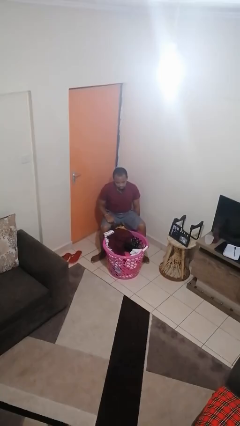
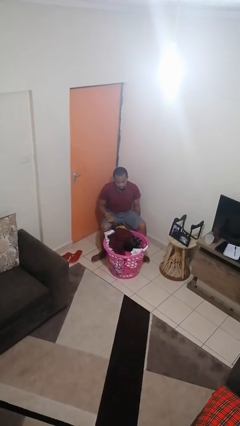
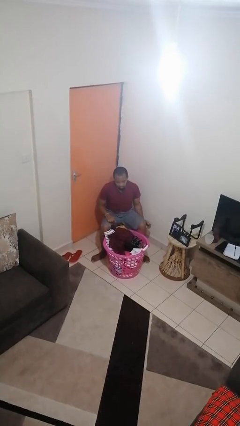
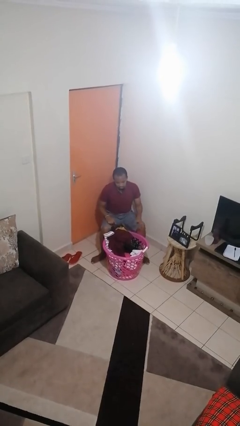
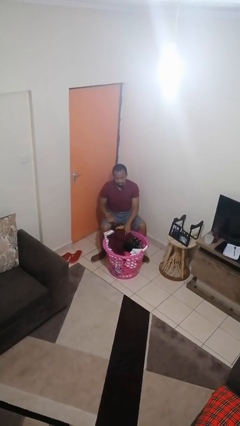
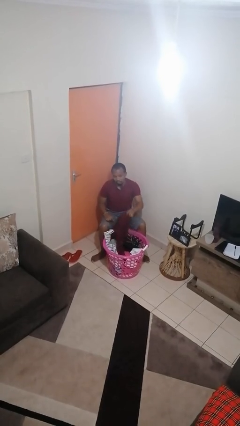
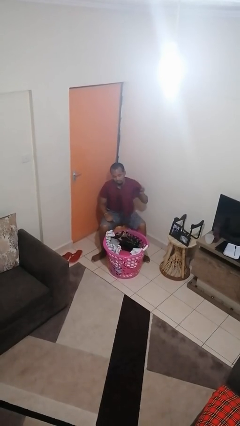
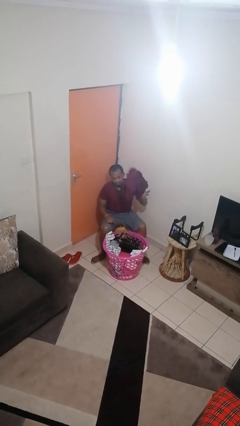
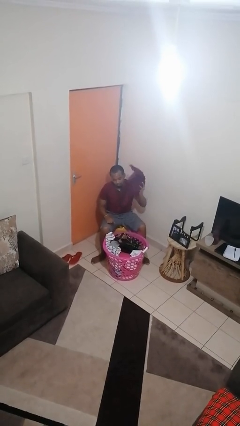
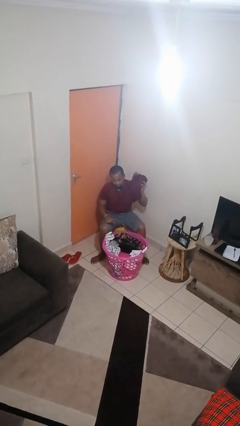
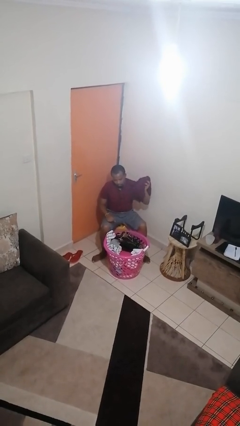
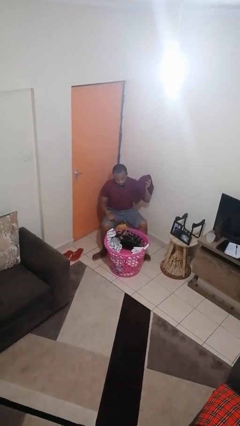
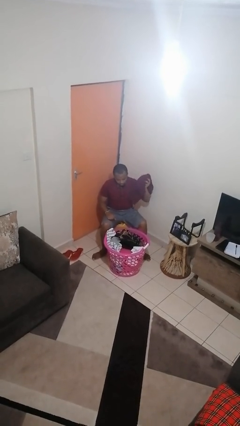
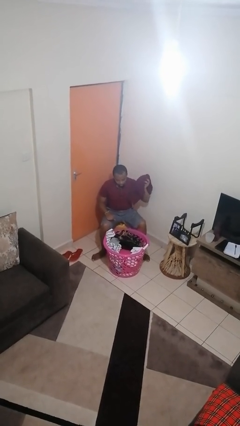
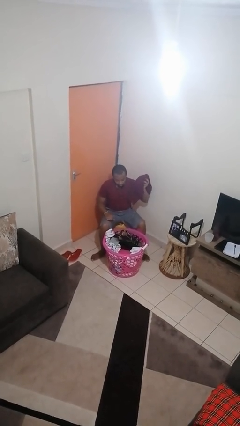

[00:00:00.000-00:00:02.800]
person takes object from basket

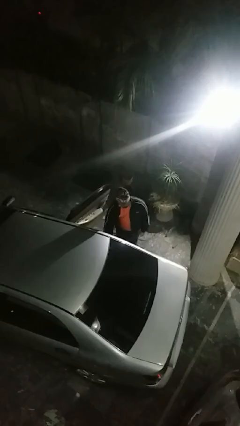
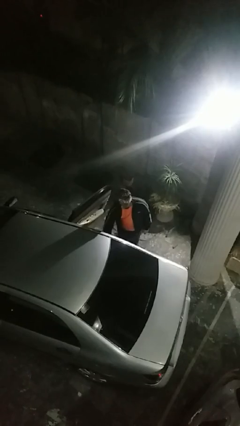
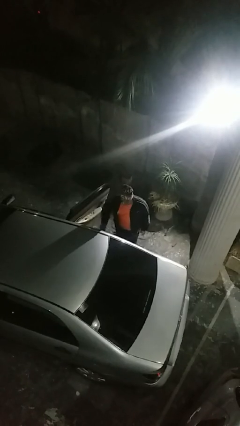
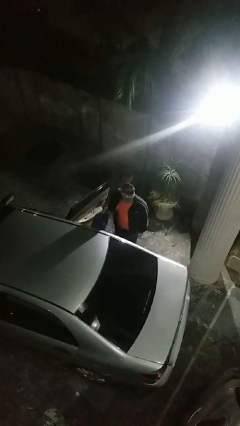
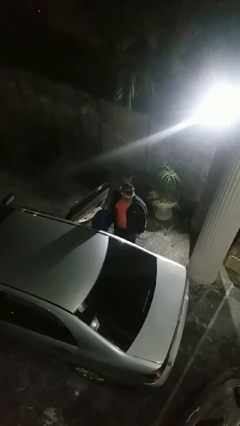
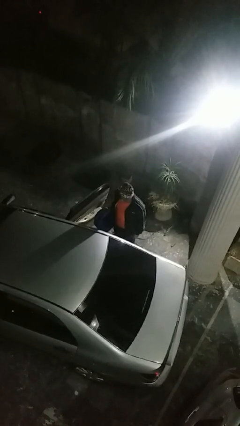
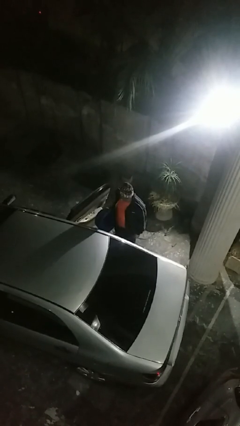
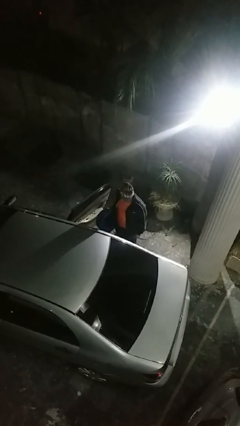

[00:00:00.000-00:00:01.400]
person unloads car

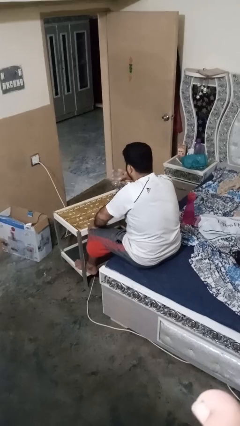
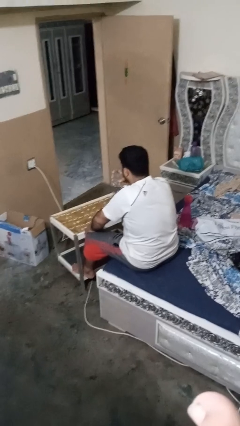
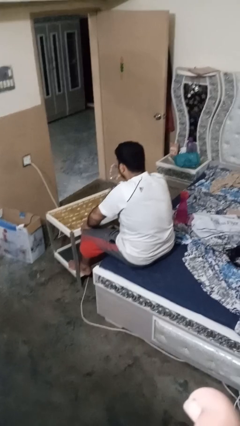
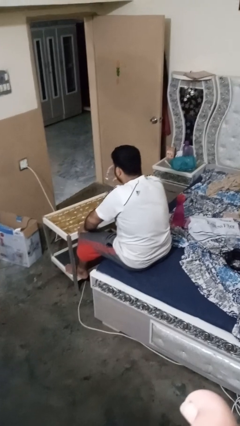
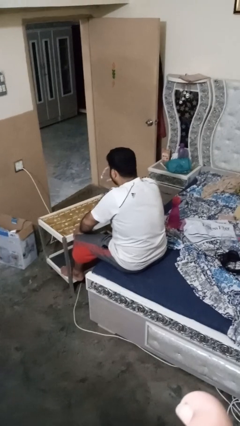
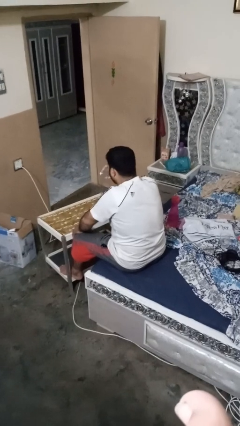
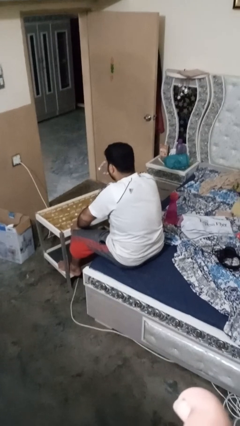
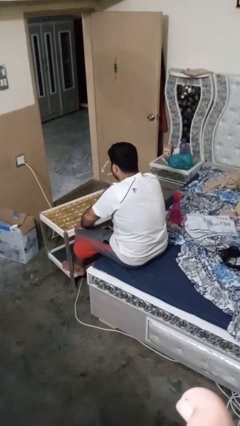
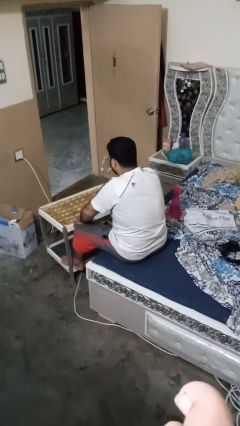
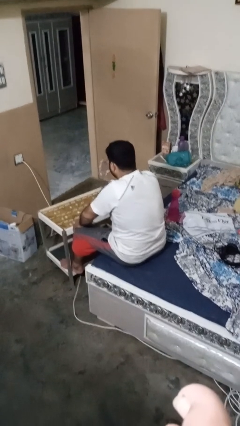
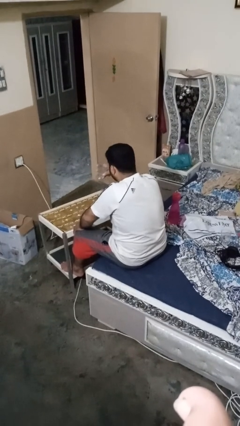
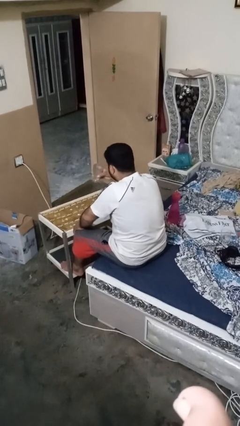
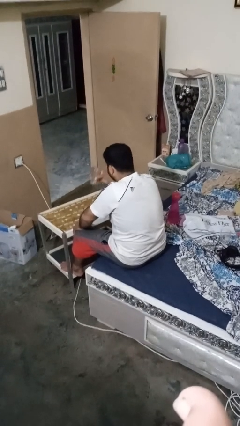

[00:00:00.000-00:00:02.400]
person drinks from shotglass

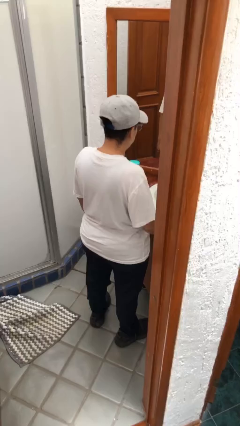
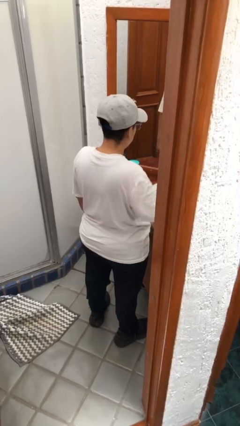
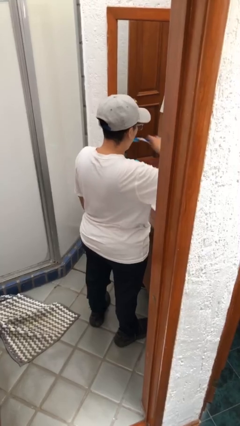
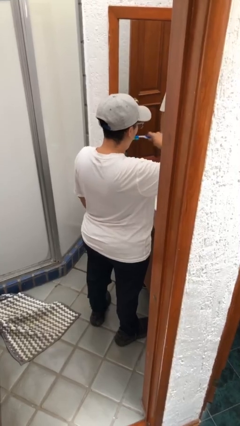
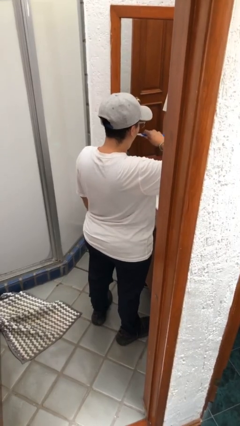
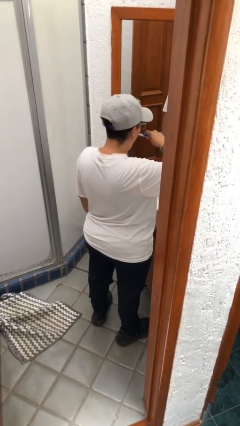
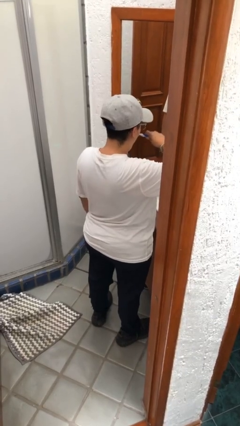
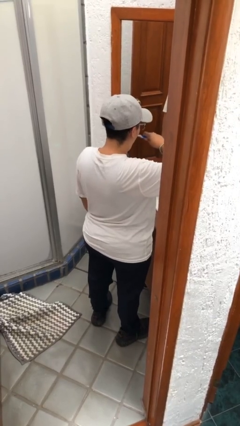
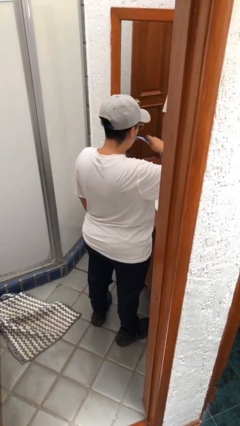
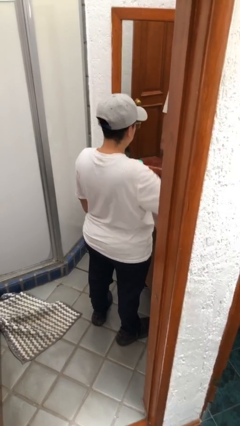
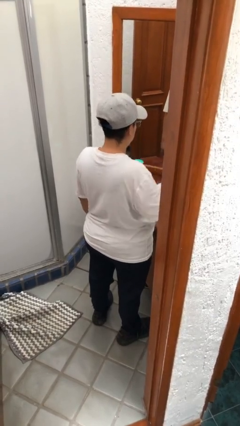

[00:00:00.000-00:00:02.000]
person brushes teeth

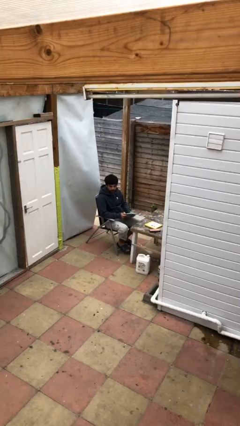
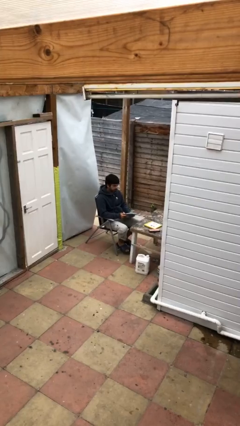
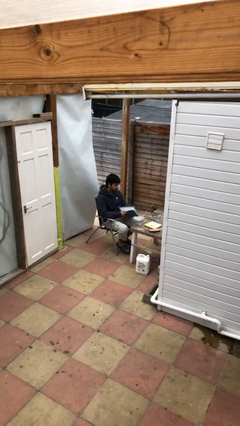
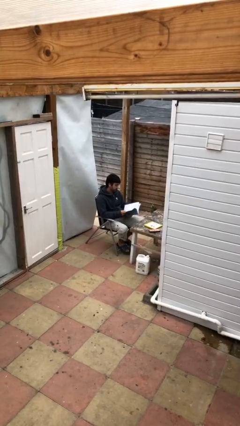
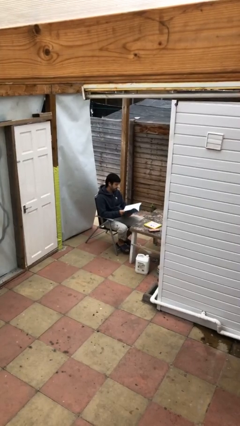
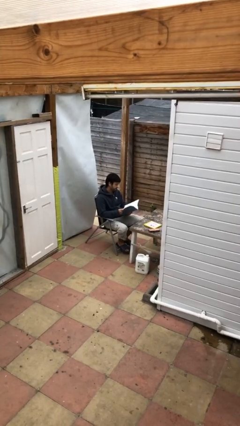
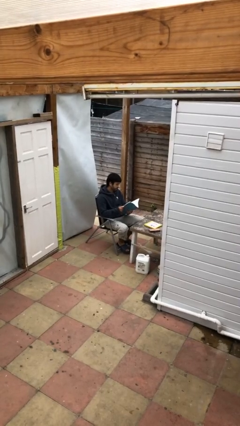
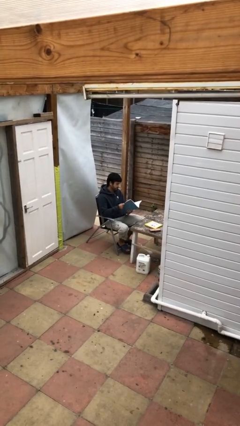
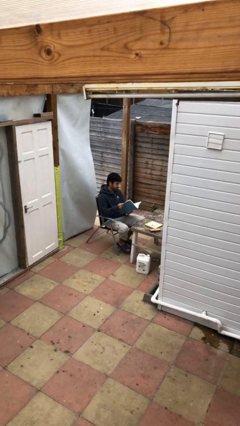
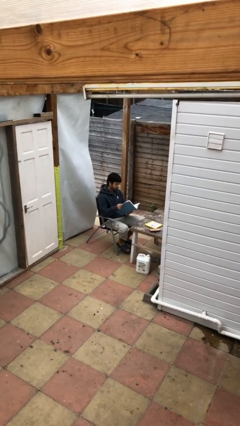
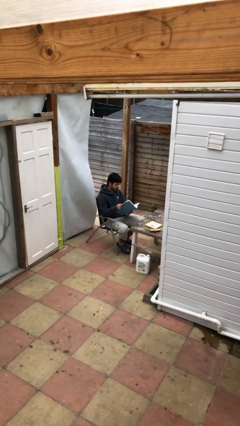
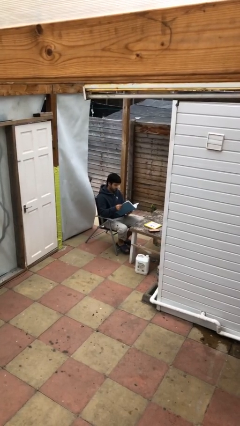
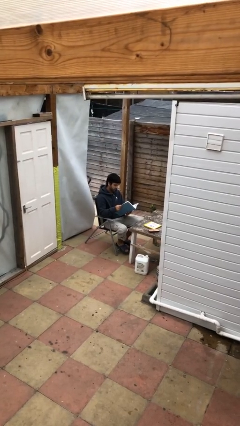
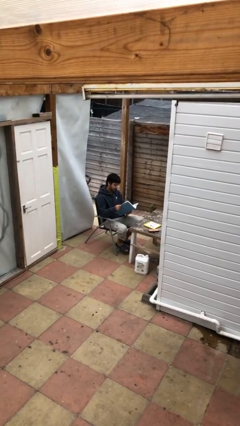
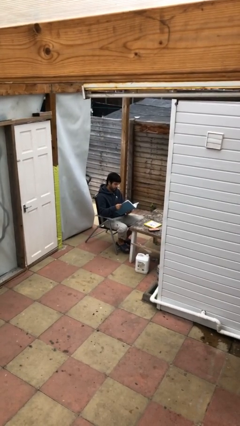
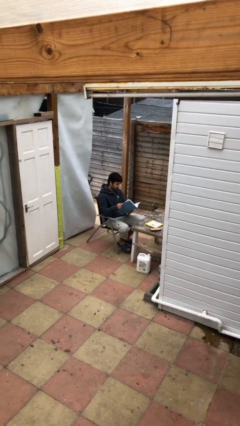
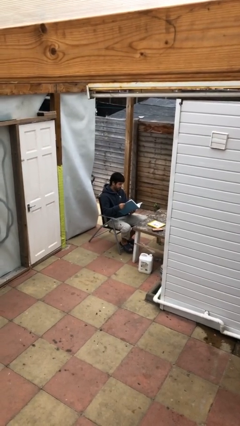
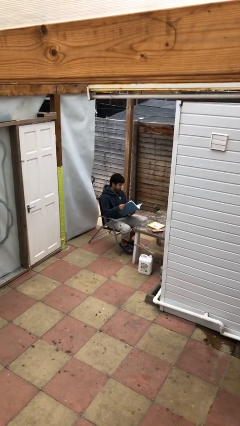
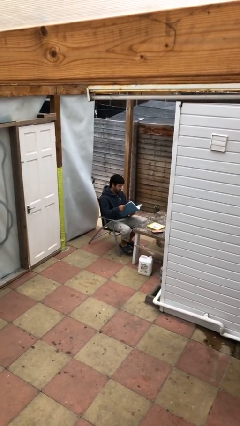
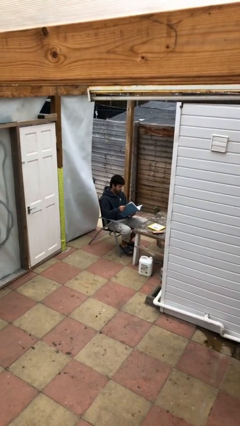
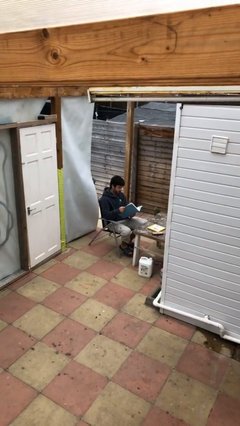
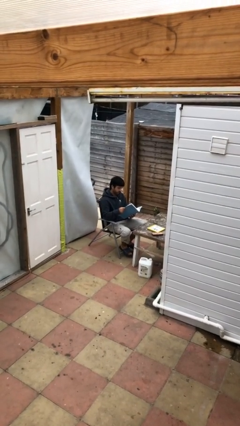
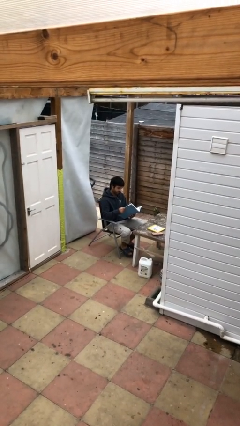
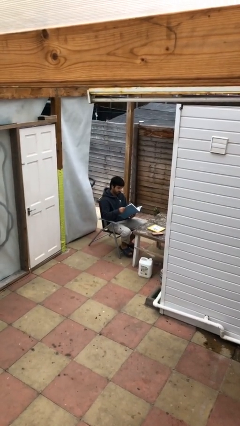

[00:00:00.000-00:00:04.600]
person reads document

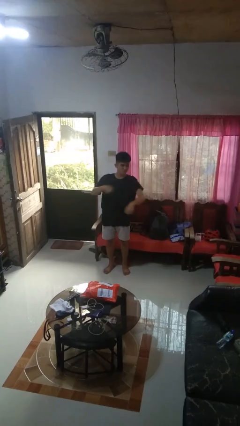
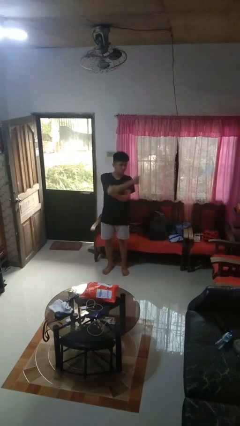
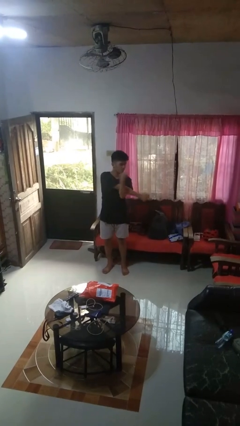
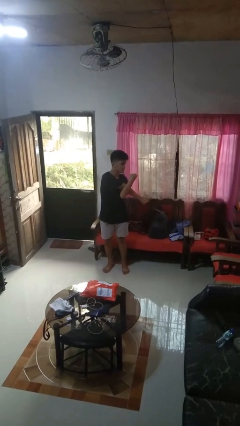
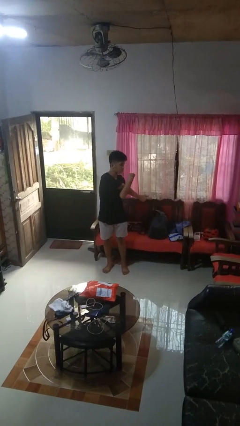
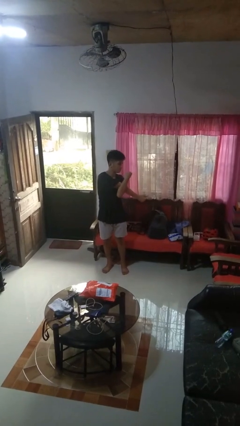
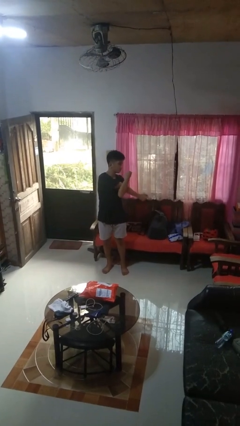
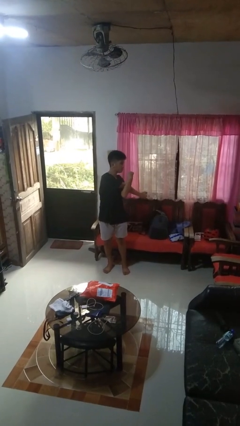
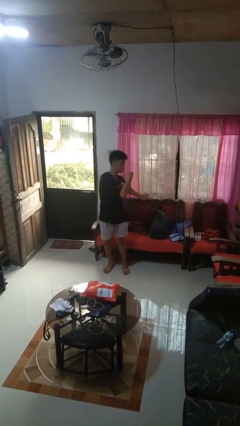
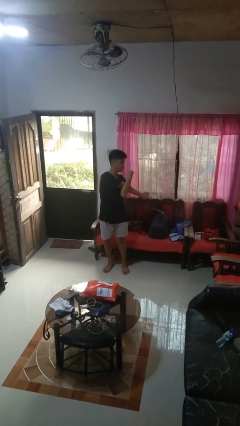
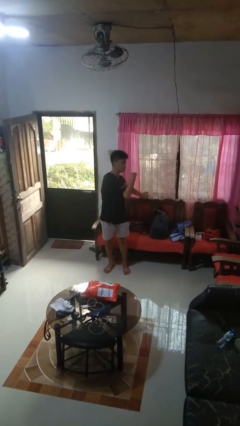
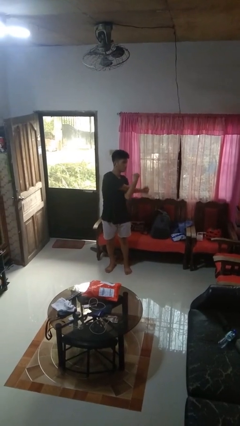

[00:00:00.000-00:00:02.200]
person stretches arms to side

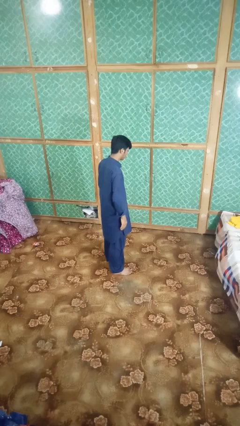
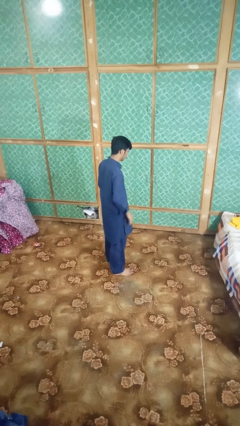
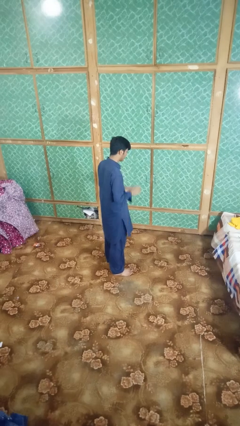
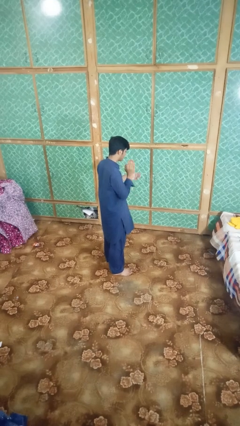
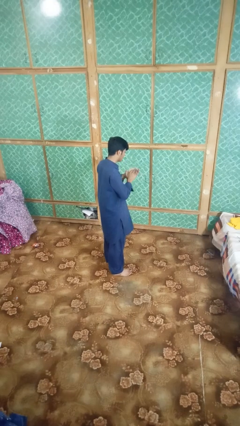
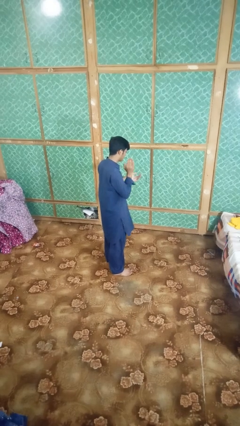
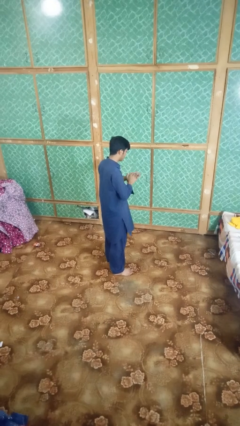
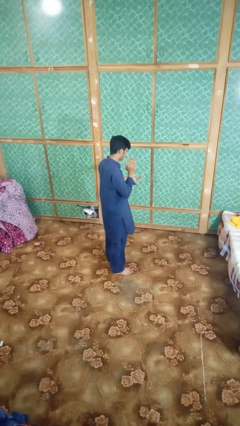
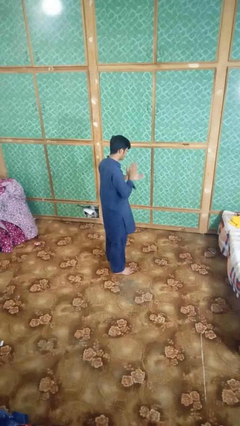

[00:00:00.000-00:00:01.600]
person claps hands
